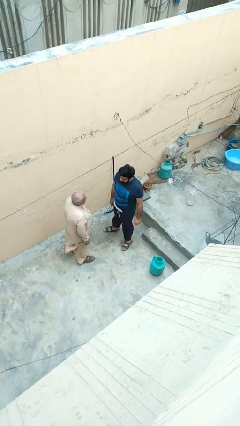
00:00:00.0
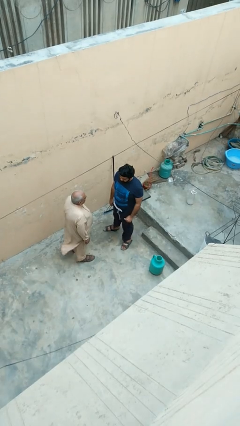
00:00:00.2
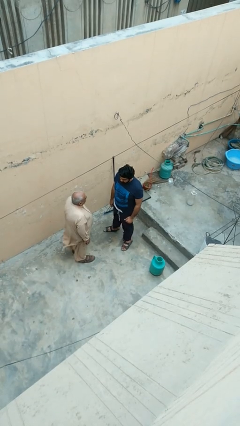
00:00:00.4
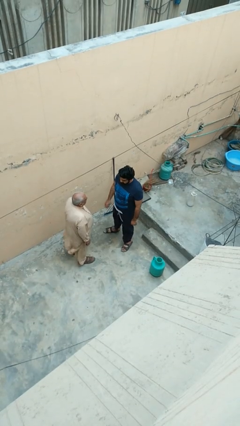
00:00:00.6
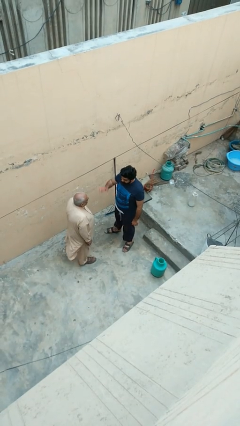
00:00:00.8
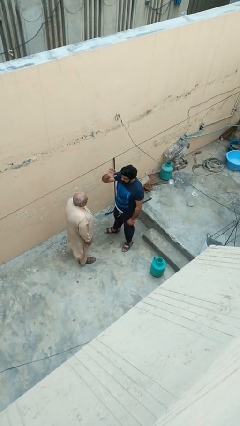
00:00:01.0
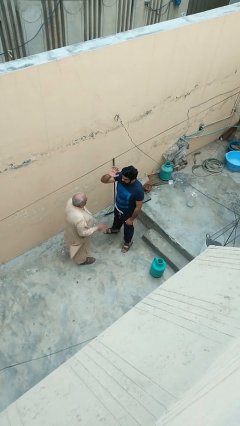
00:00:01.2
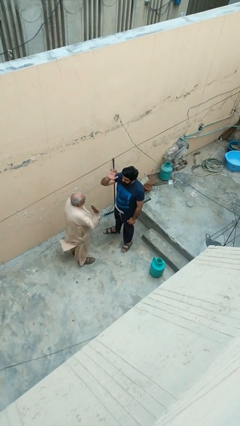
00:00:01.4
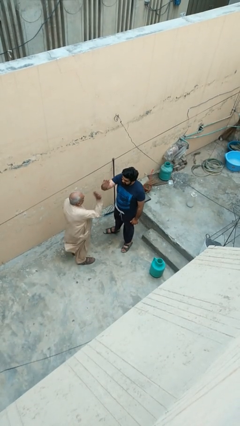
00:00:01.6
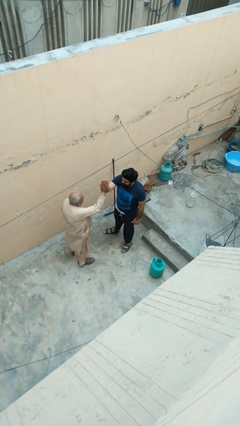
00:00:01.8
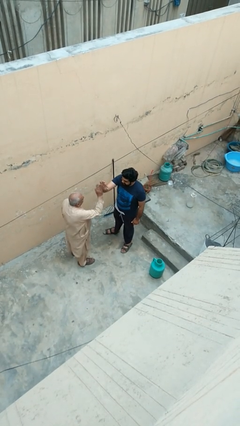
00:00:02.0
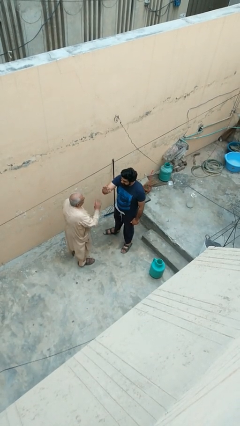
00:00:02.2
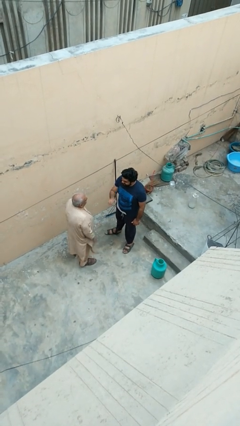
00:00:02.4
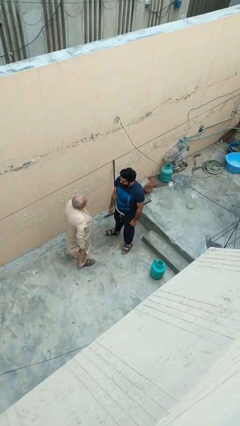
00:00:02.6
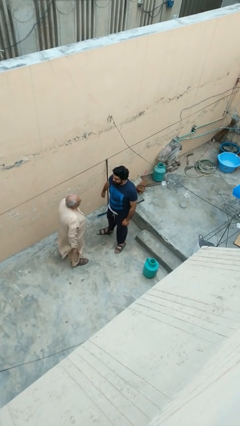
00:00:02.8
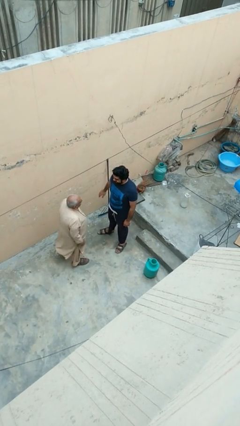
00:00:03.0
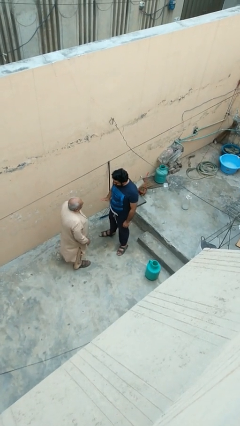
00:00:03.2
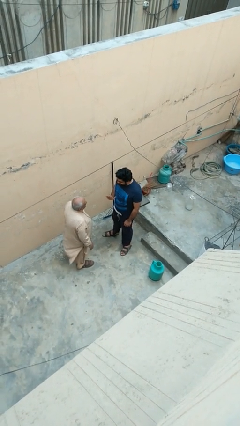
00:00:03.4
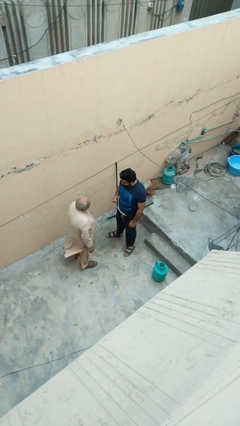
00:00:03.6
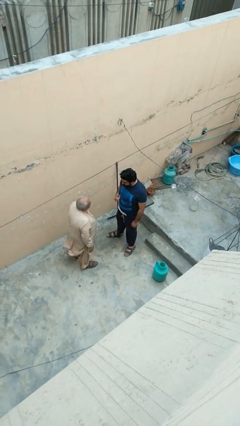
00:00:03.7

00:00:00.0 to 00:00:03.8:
person highfives hand

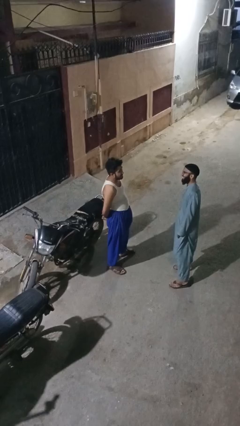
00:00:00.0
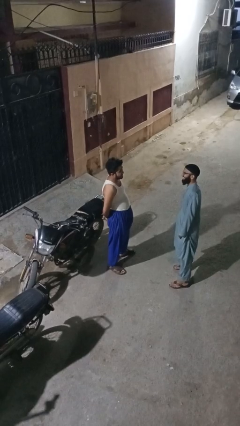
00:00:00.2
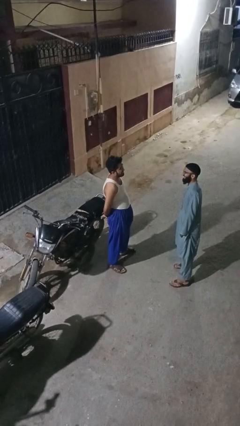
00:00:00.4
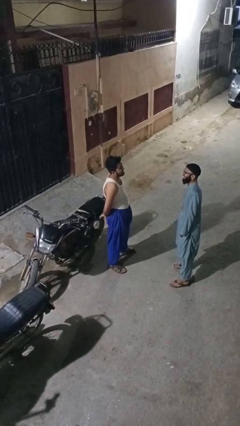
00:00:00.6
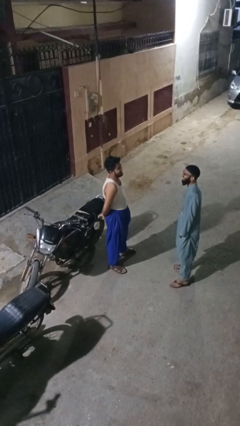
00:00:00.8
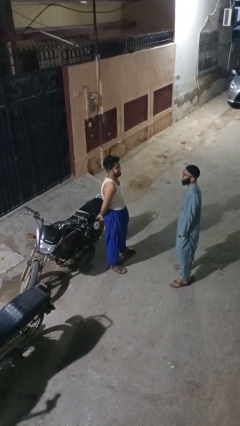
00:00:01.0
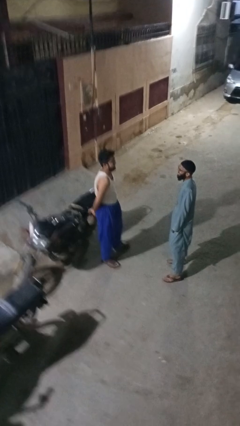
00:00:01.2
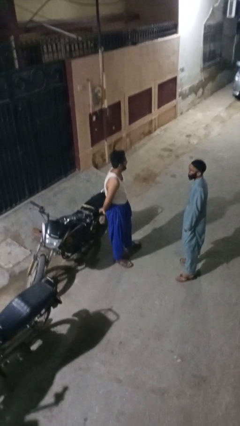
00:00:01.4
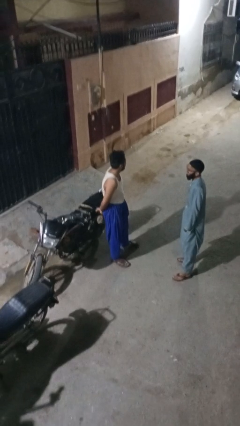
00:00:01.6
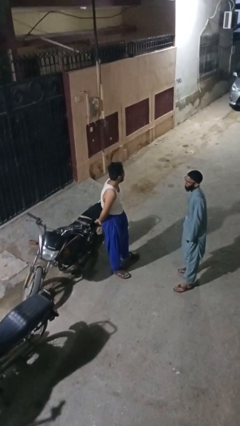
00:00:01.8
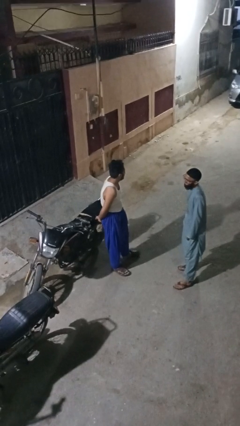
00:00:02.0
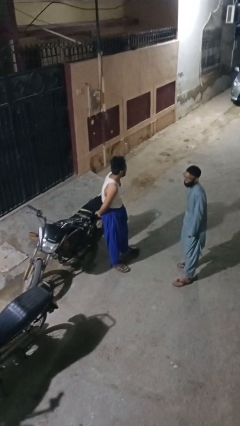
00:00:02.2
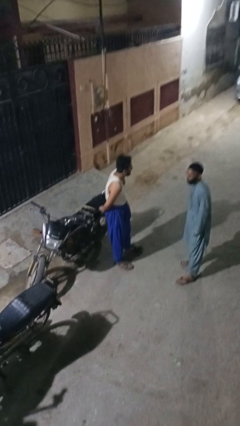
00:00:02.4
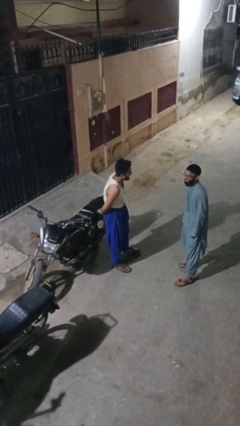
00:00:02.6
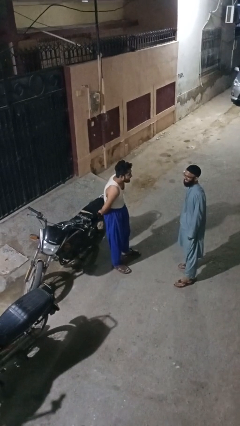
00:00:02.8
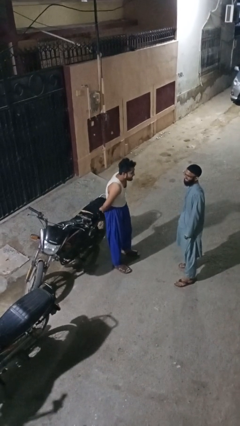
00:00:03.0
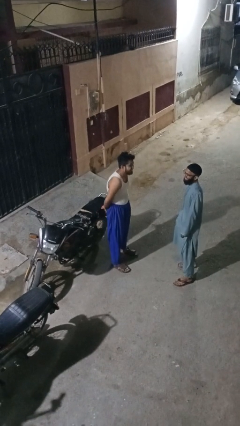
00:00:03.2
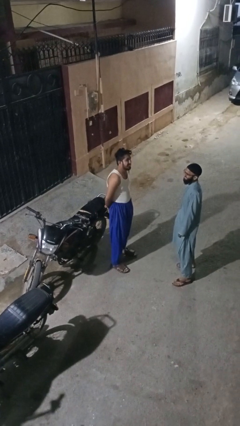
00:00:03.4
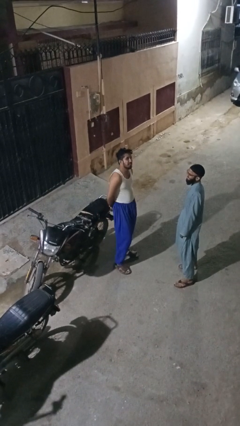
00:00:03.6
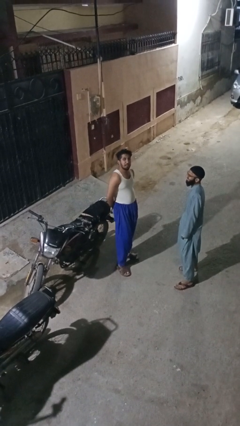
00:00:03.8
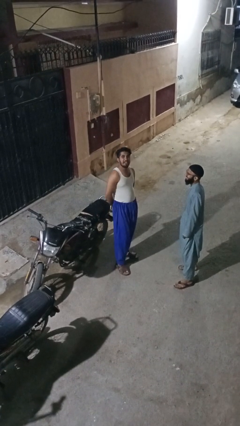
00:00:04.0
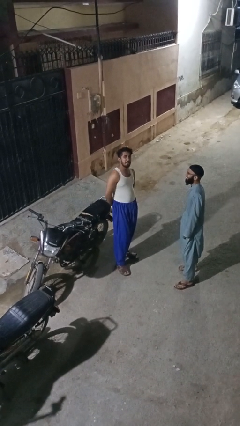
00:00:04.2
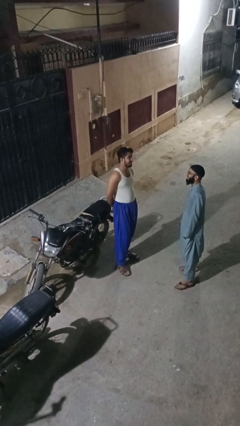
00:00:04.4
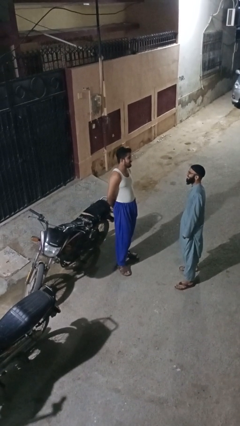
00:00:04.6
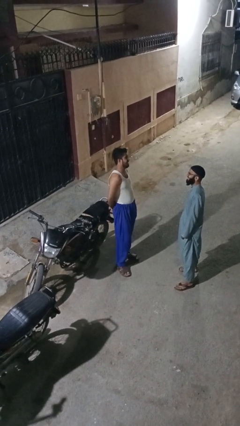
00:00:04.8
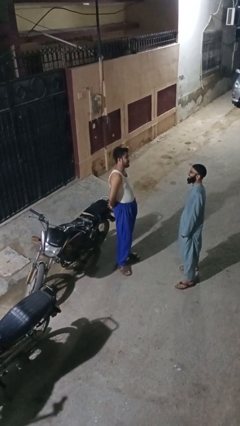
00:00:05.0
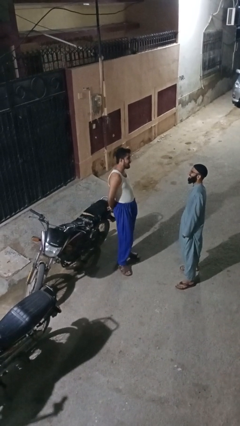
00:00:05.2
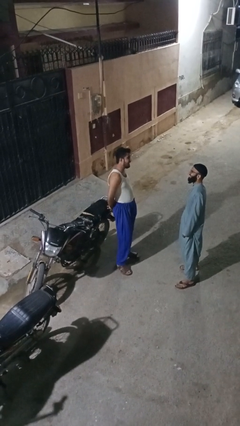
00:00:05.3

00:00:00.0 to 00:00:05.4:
person laughs with person

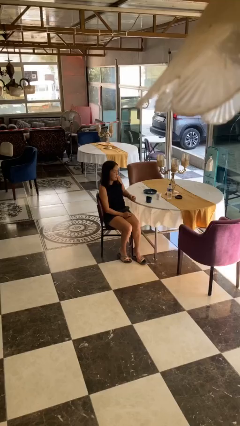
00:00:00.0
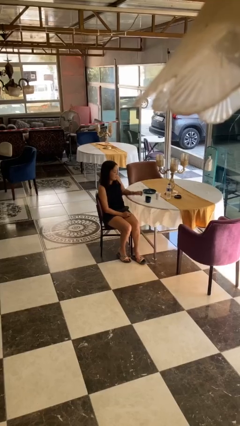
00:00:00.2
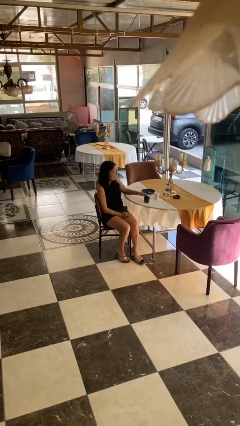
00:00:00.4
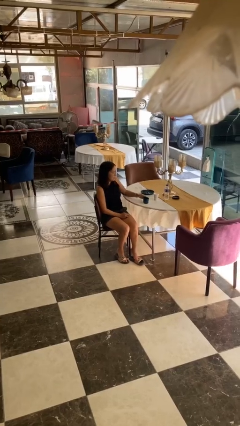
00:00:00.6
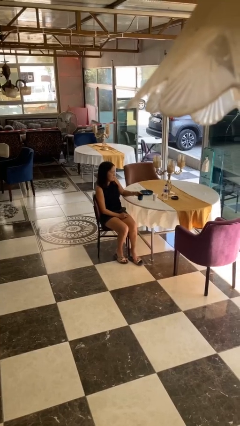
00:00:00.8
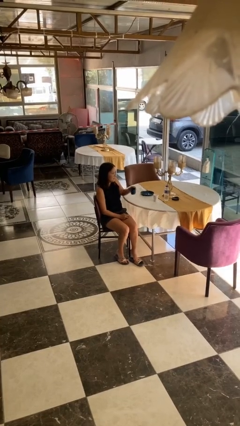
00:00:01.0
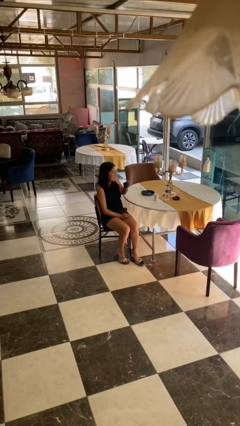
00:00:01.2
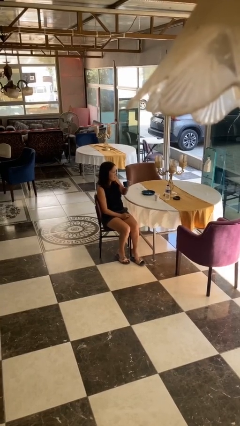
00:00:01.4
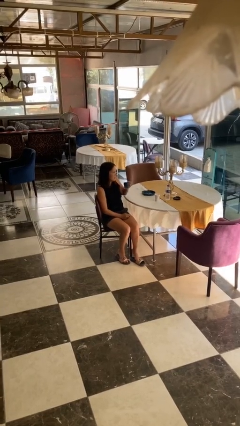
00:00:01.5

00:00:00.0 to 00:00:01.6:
person picks up object from table

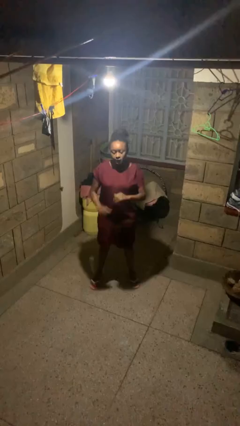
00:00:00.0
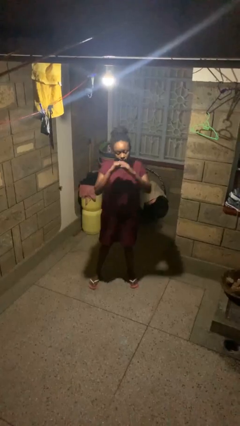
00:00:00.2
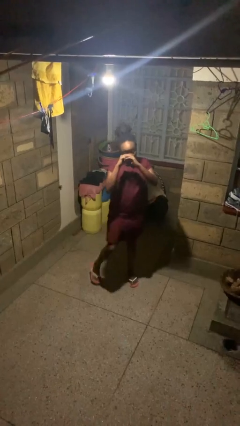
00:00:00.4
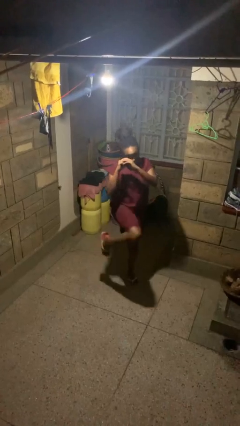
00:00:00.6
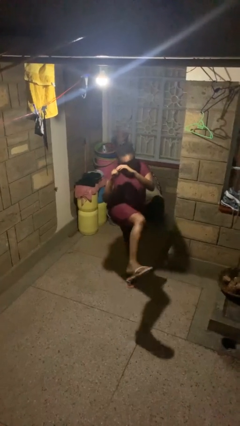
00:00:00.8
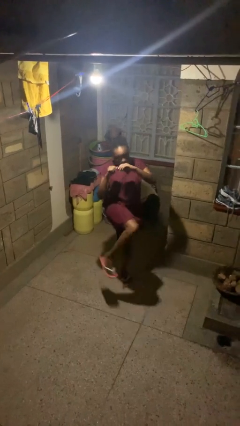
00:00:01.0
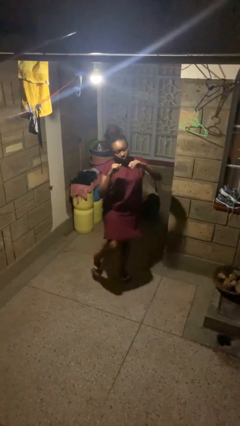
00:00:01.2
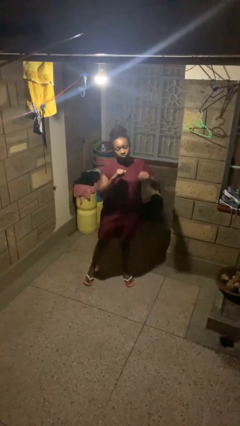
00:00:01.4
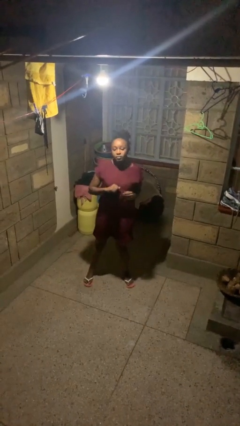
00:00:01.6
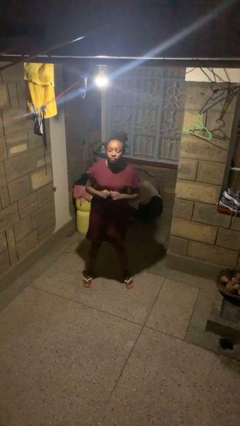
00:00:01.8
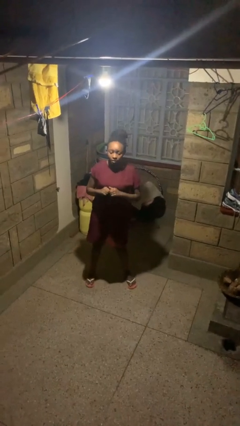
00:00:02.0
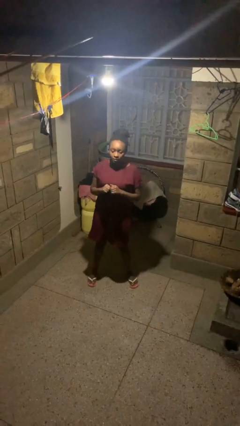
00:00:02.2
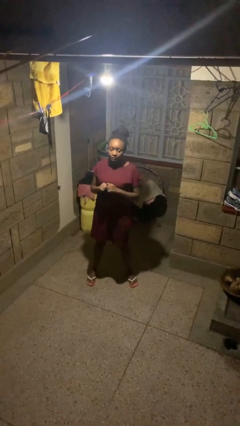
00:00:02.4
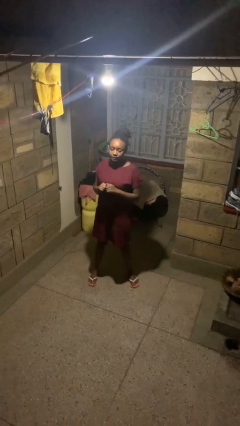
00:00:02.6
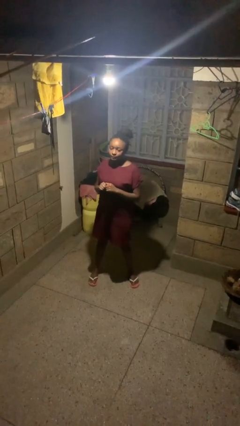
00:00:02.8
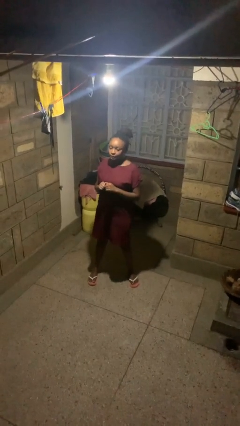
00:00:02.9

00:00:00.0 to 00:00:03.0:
person karate kicks

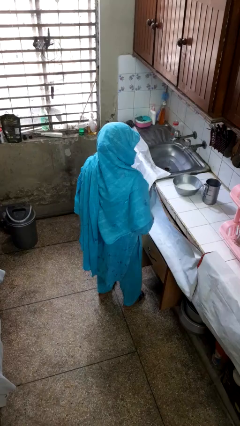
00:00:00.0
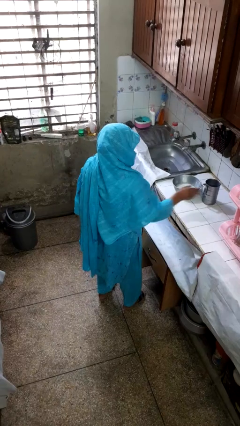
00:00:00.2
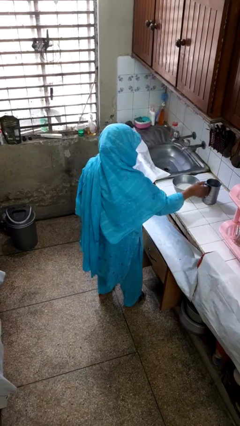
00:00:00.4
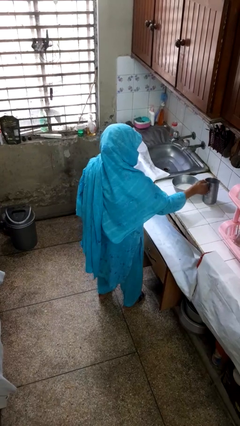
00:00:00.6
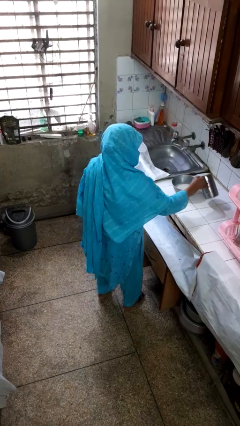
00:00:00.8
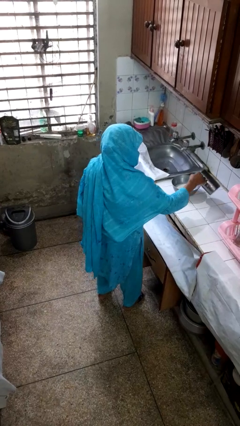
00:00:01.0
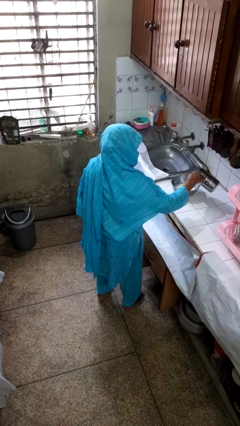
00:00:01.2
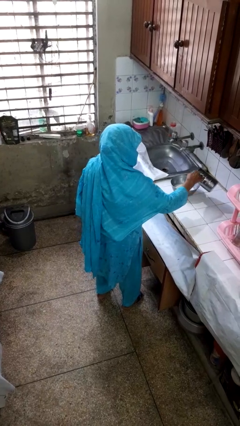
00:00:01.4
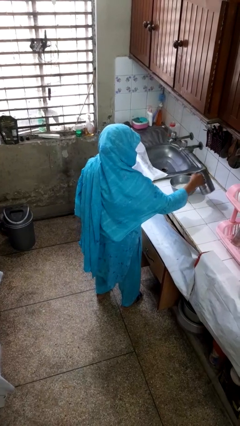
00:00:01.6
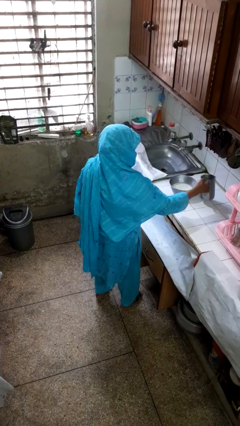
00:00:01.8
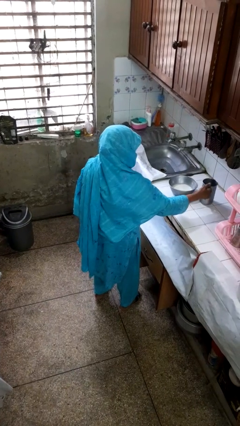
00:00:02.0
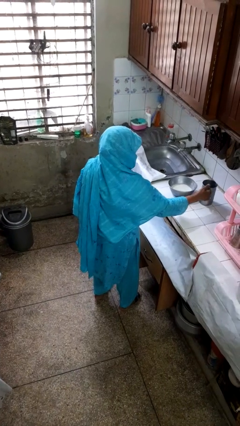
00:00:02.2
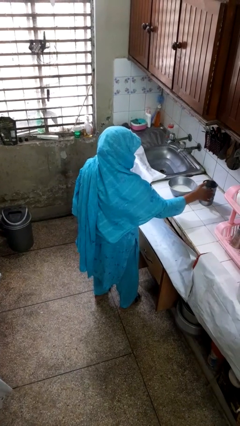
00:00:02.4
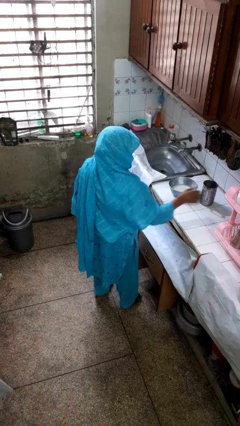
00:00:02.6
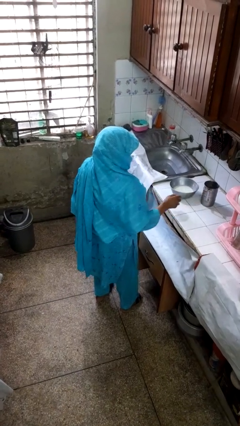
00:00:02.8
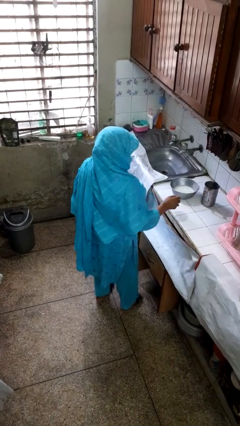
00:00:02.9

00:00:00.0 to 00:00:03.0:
person pours into bowl

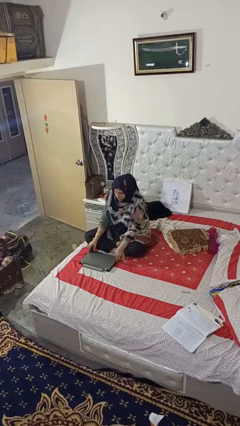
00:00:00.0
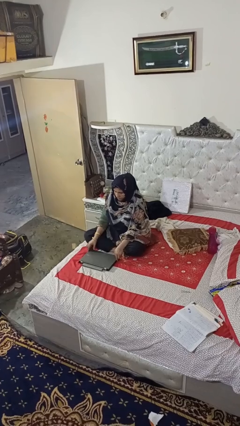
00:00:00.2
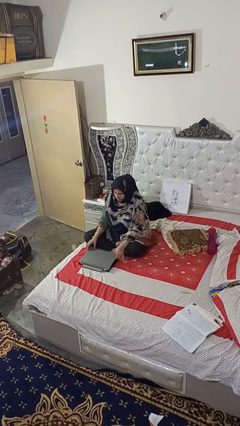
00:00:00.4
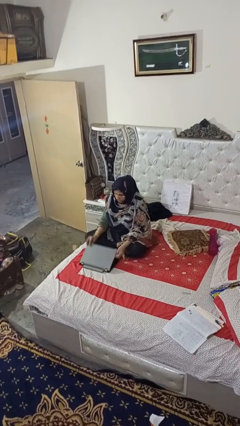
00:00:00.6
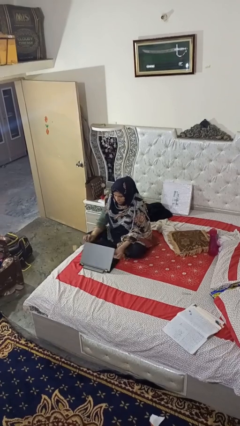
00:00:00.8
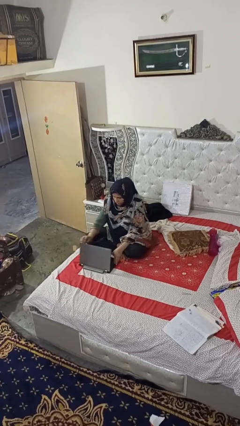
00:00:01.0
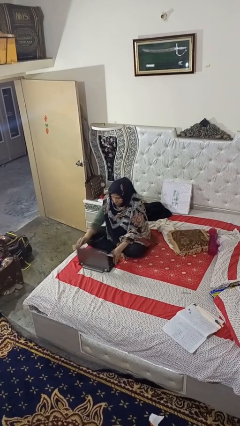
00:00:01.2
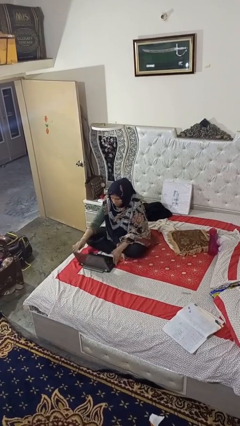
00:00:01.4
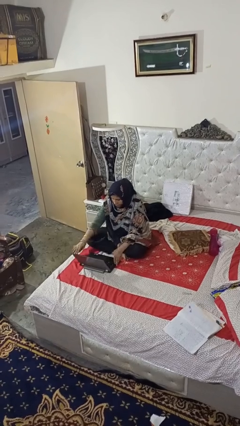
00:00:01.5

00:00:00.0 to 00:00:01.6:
person opens laptop
